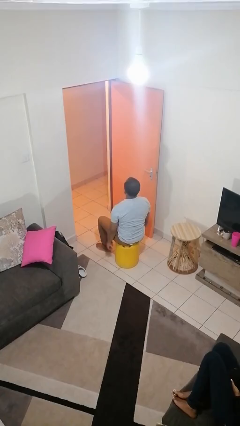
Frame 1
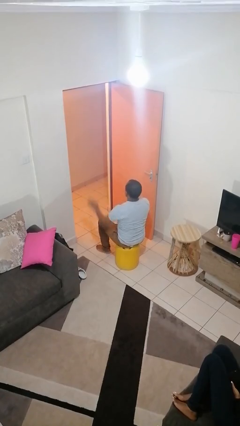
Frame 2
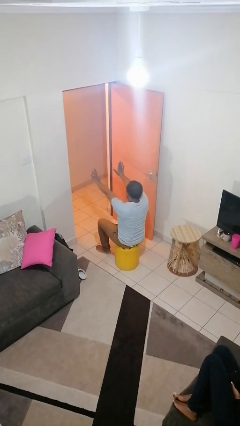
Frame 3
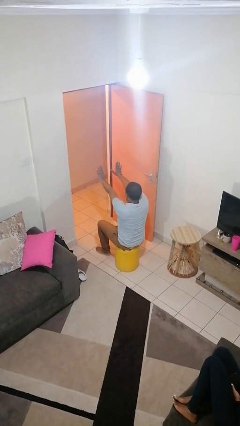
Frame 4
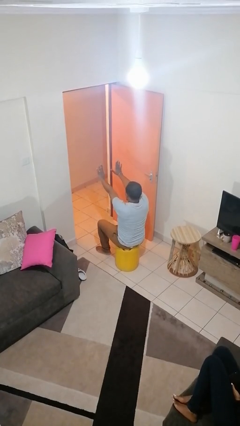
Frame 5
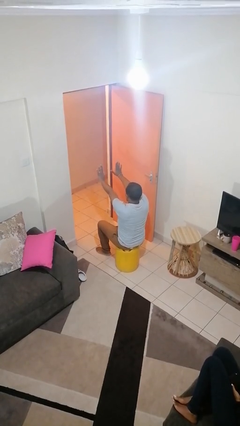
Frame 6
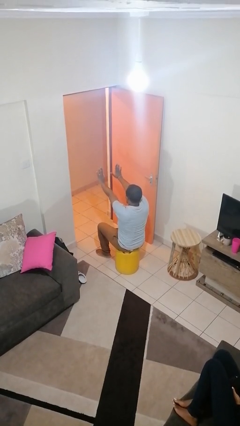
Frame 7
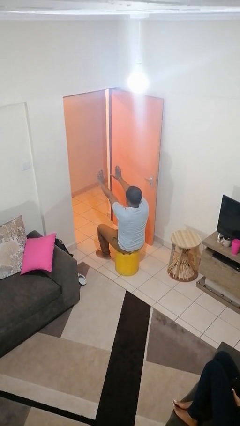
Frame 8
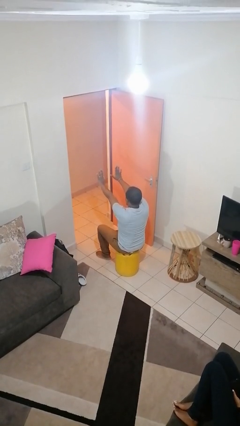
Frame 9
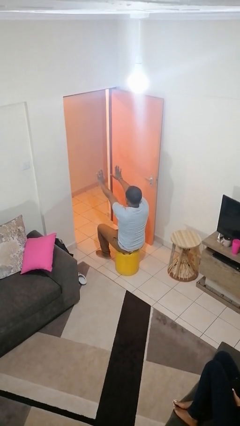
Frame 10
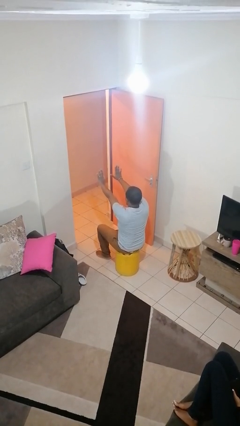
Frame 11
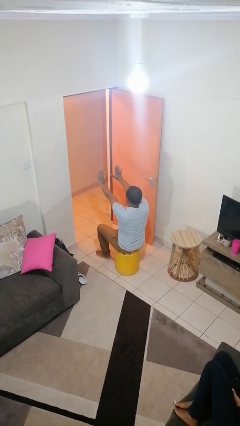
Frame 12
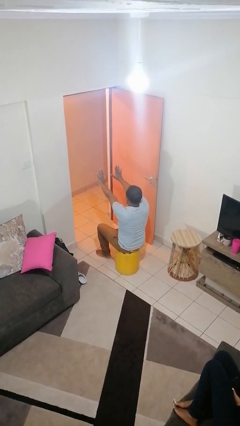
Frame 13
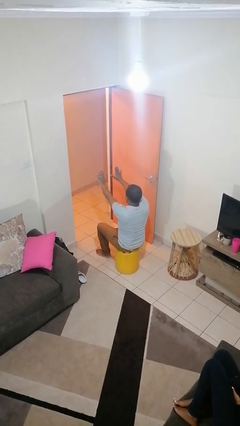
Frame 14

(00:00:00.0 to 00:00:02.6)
person gestures stop

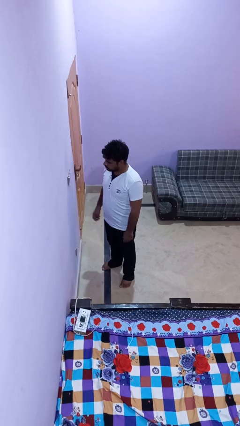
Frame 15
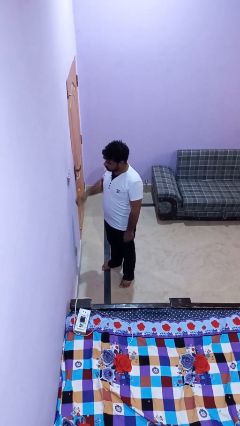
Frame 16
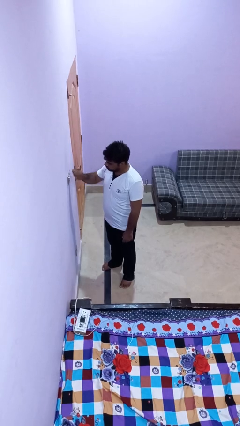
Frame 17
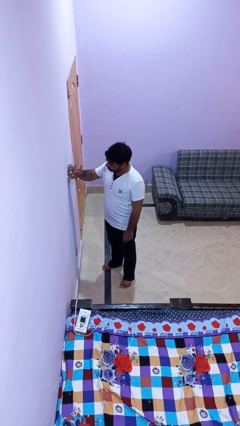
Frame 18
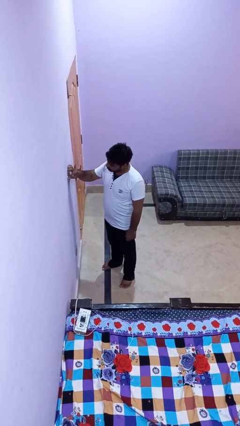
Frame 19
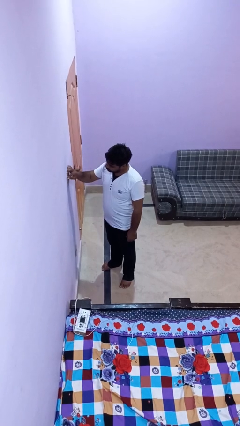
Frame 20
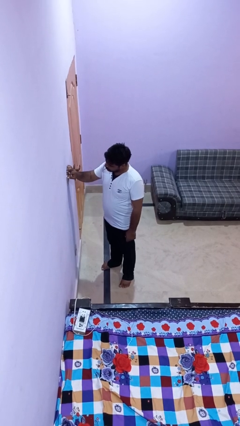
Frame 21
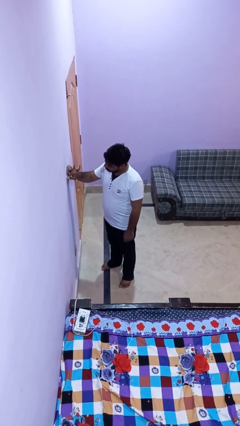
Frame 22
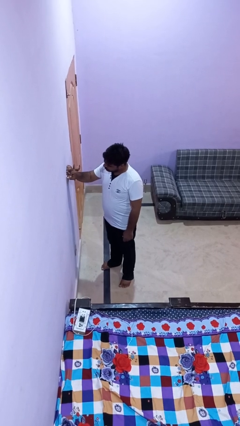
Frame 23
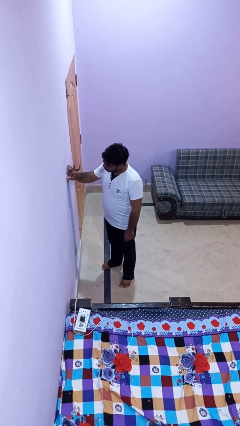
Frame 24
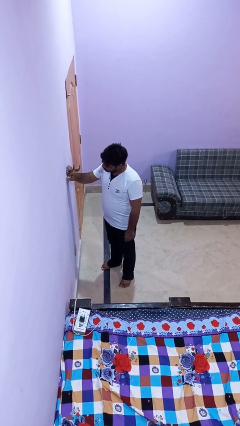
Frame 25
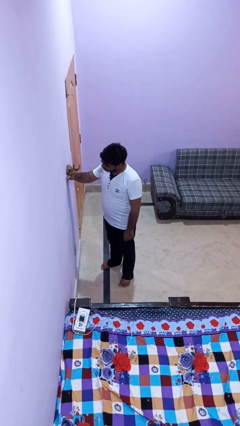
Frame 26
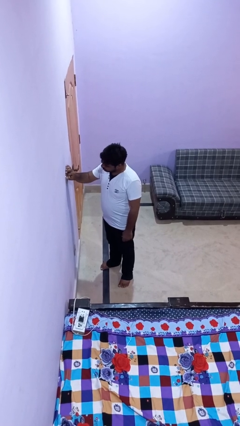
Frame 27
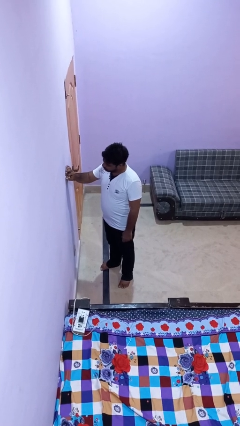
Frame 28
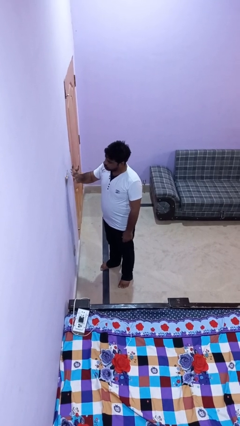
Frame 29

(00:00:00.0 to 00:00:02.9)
person adjusts thermostat

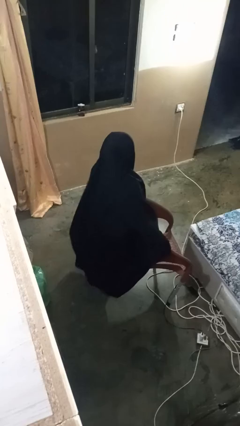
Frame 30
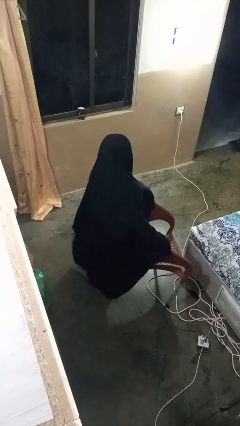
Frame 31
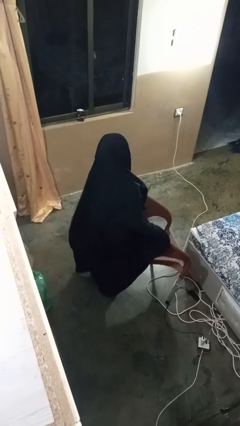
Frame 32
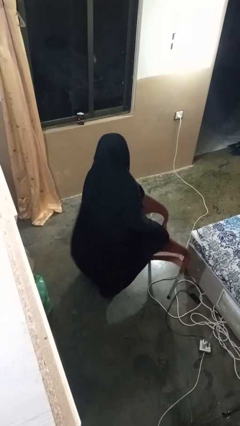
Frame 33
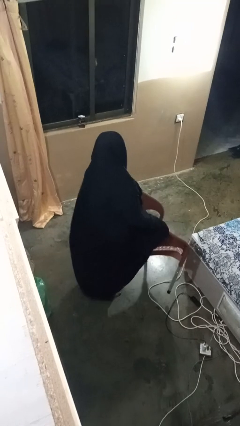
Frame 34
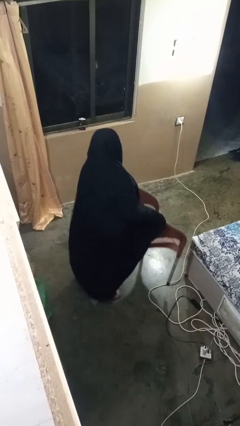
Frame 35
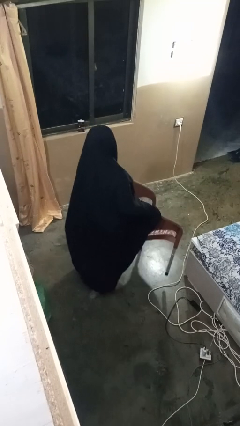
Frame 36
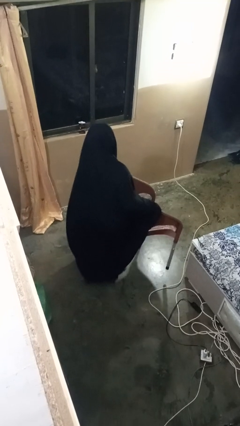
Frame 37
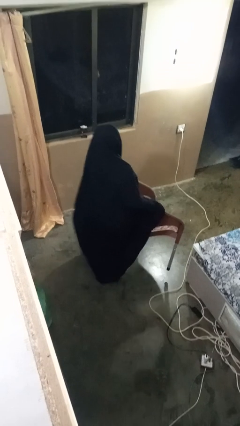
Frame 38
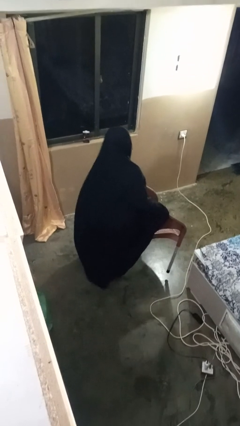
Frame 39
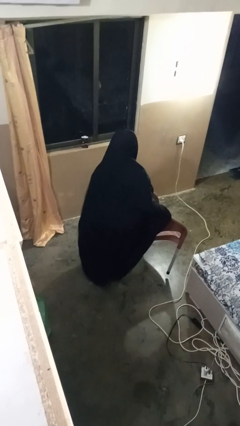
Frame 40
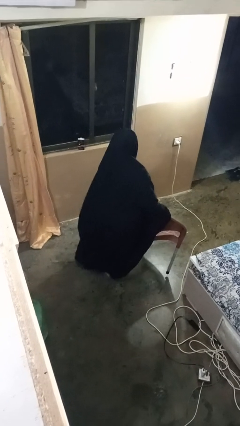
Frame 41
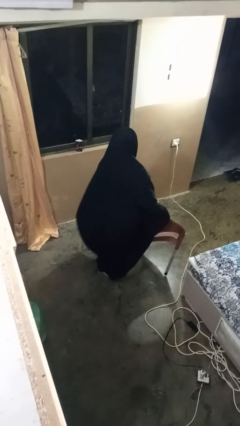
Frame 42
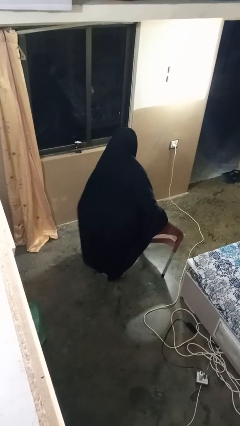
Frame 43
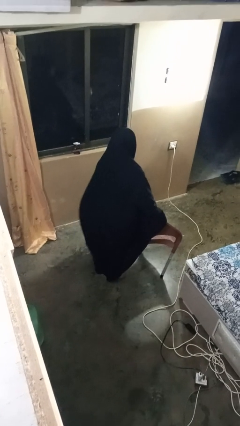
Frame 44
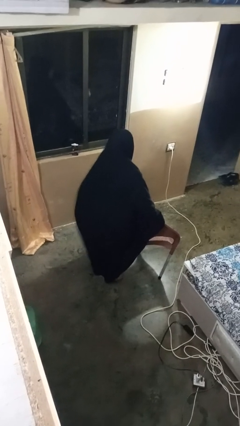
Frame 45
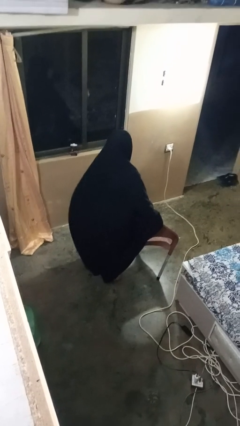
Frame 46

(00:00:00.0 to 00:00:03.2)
person carries furniture

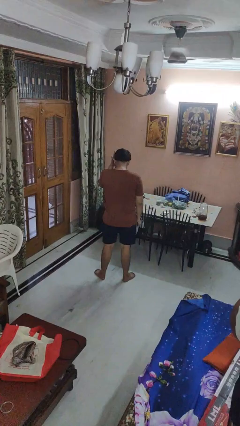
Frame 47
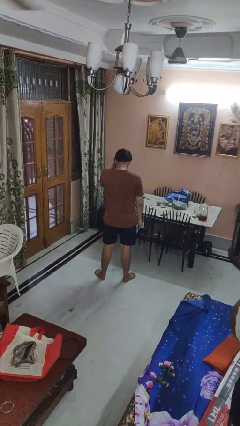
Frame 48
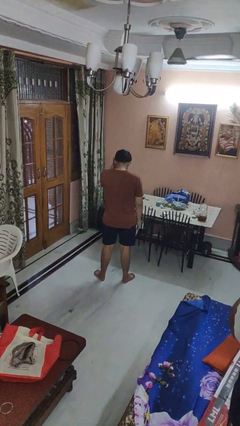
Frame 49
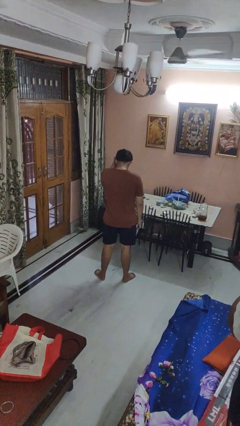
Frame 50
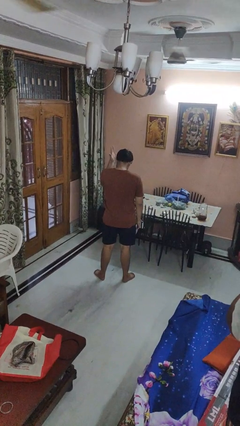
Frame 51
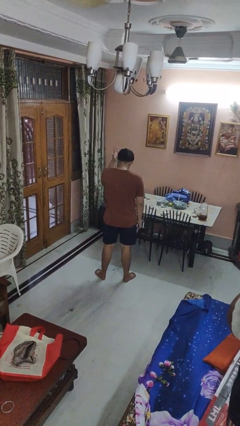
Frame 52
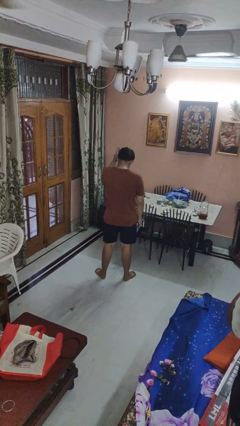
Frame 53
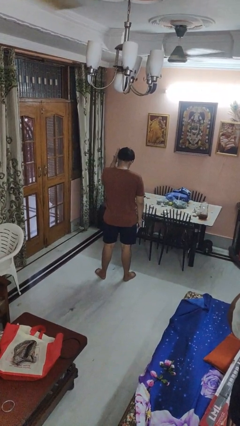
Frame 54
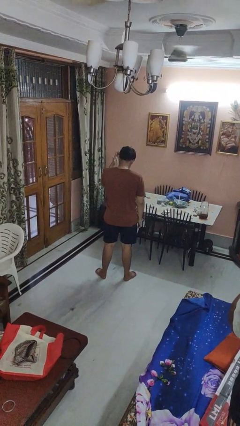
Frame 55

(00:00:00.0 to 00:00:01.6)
person pats head

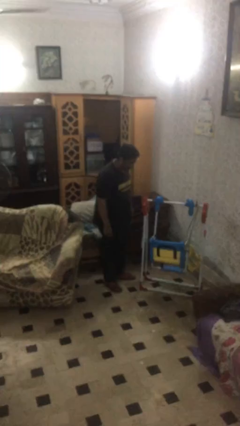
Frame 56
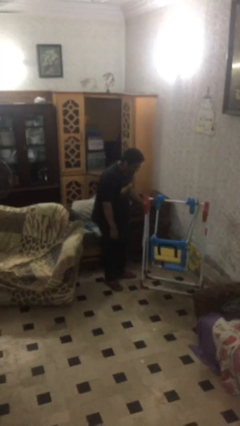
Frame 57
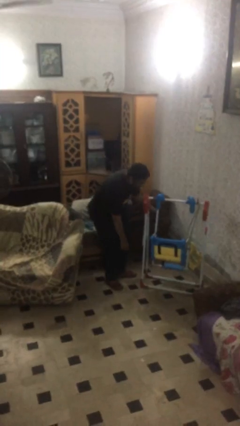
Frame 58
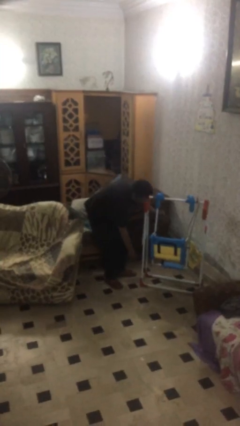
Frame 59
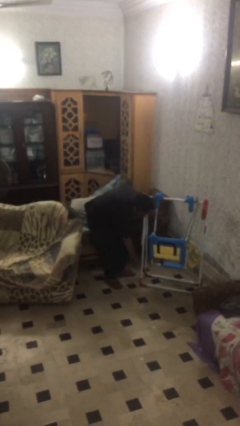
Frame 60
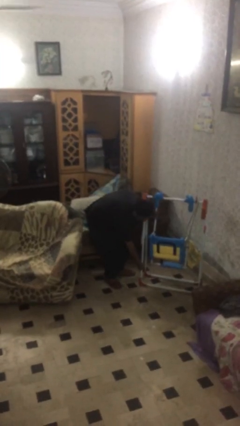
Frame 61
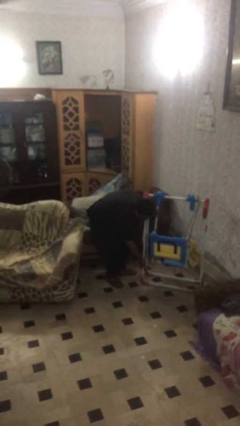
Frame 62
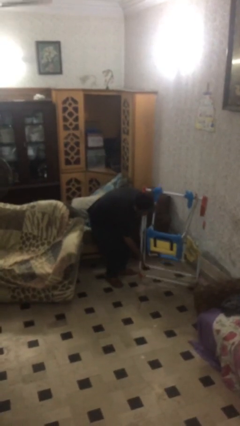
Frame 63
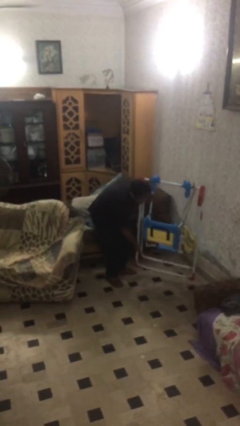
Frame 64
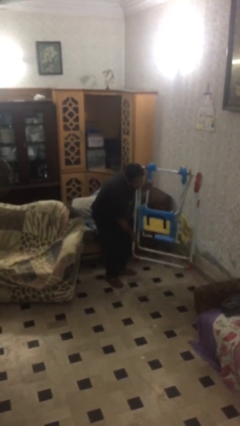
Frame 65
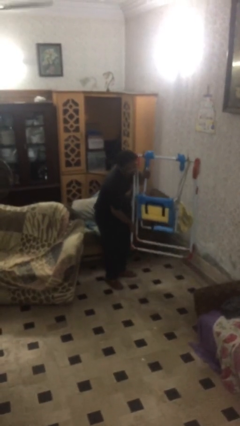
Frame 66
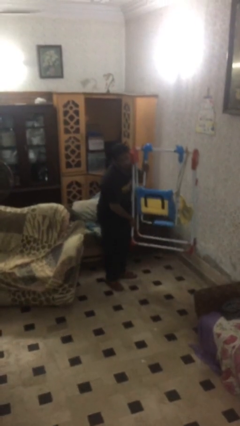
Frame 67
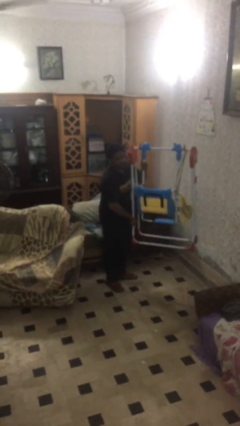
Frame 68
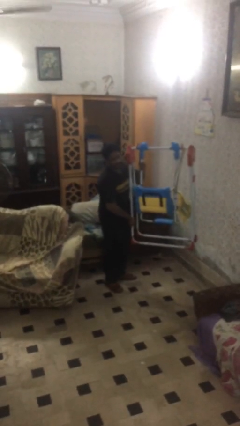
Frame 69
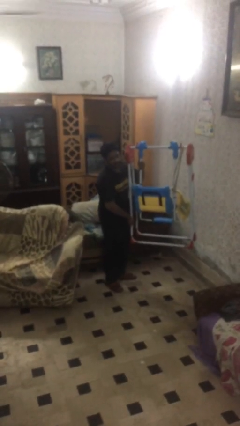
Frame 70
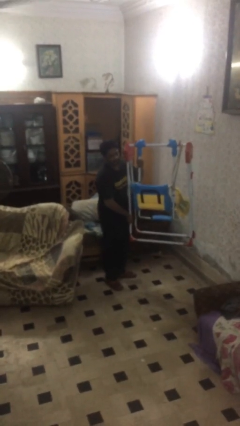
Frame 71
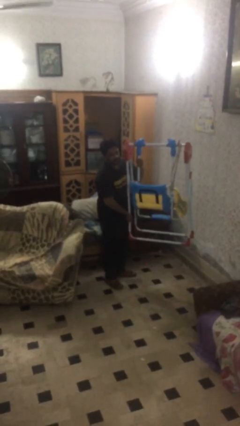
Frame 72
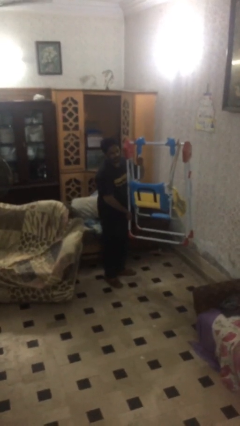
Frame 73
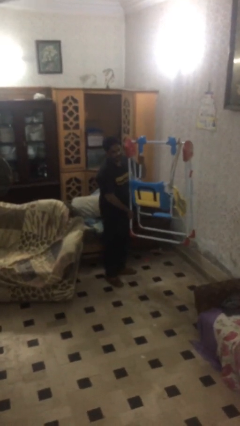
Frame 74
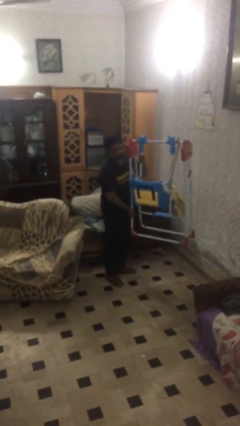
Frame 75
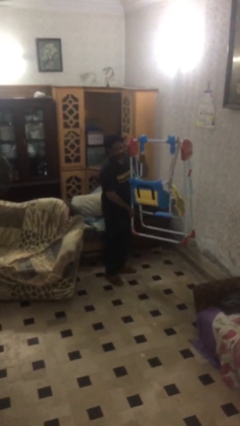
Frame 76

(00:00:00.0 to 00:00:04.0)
person picks up object from floor

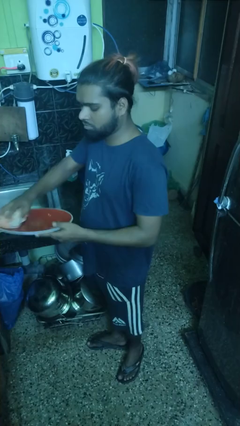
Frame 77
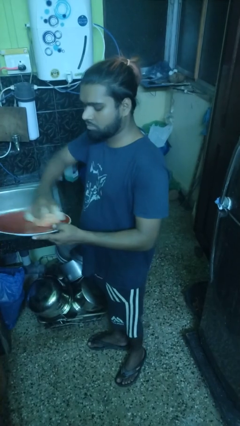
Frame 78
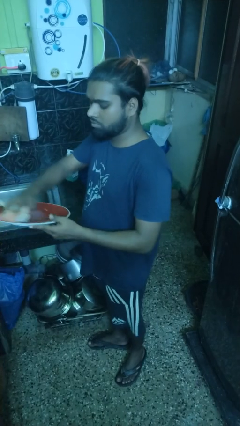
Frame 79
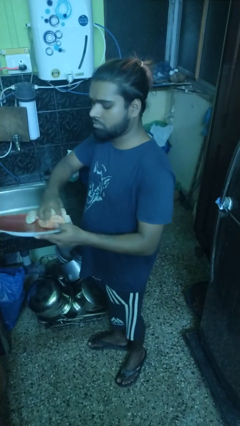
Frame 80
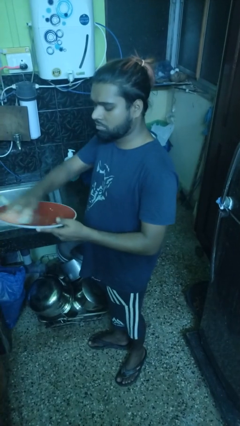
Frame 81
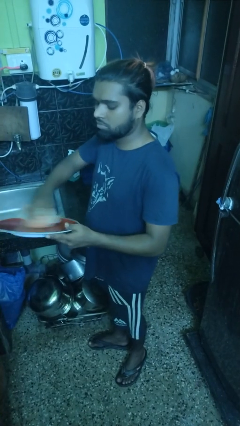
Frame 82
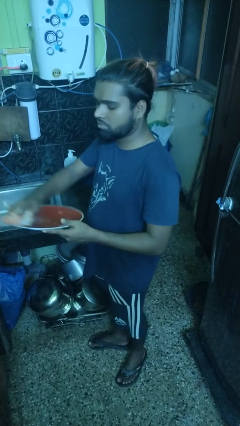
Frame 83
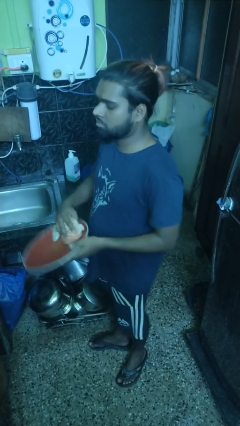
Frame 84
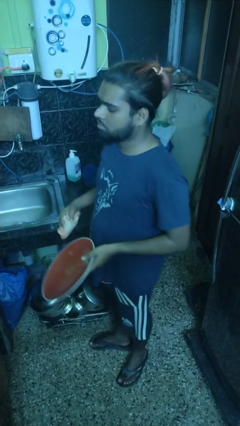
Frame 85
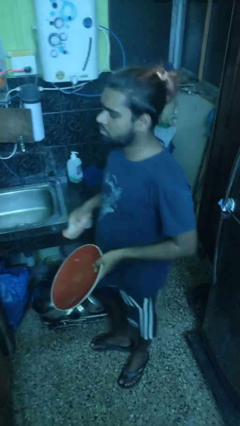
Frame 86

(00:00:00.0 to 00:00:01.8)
person dries dish

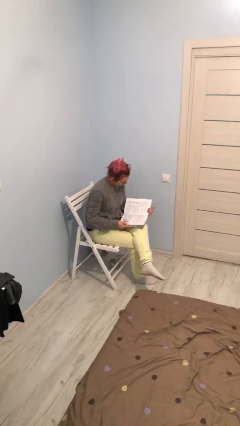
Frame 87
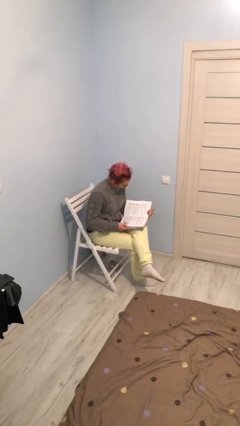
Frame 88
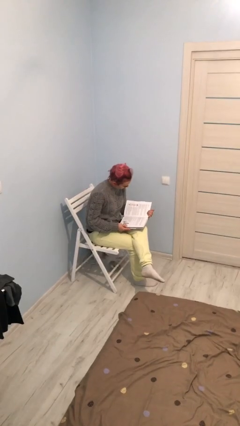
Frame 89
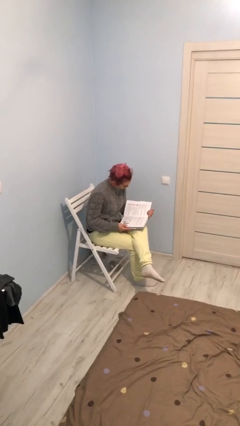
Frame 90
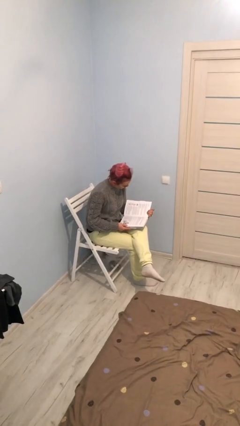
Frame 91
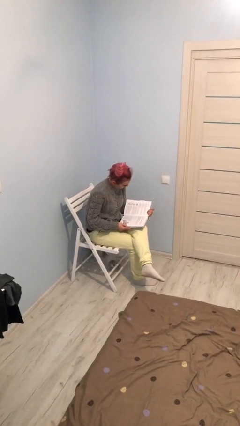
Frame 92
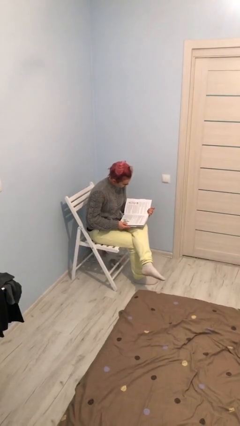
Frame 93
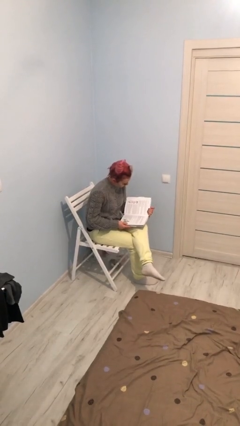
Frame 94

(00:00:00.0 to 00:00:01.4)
person reads document
